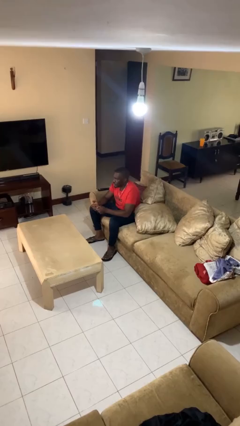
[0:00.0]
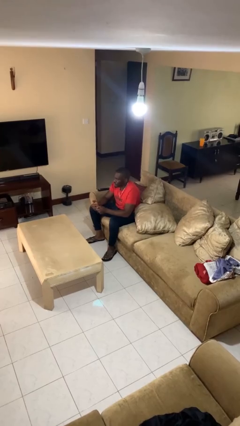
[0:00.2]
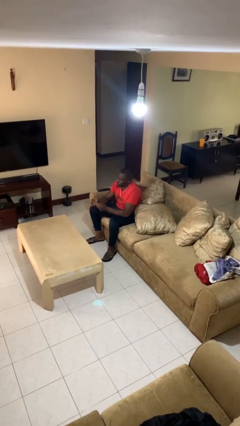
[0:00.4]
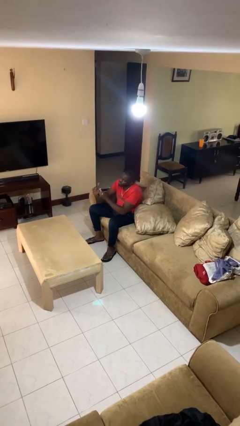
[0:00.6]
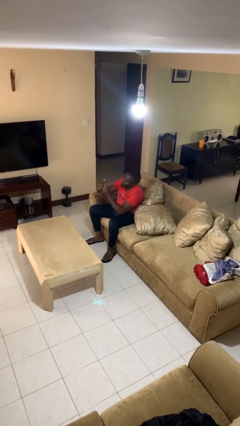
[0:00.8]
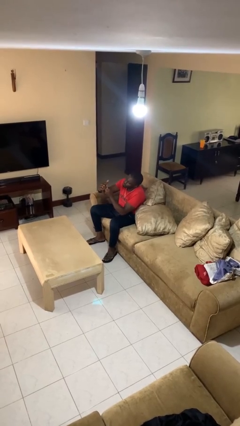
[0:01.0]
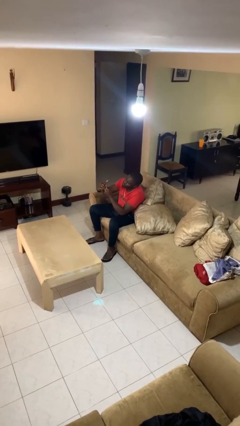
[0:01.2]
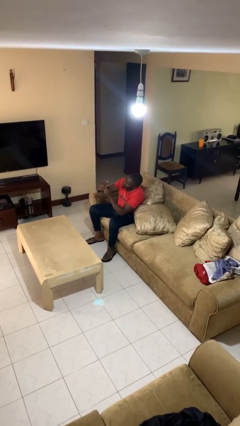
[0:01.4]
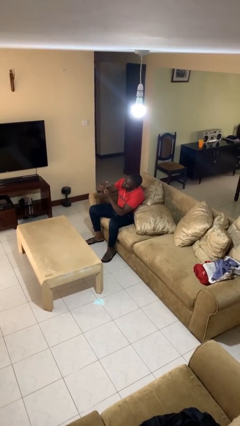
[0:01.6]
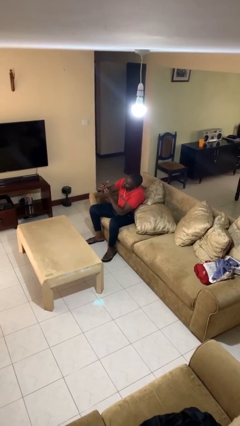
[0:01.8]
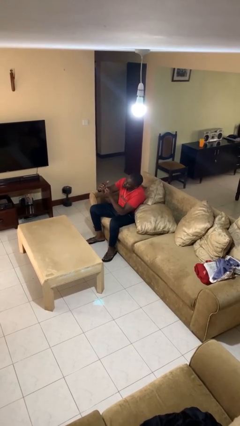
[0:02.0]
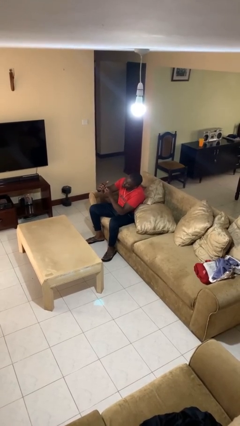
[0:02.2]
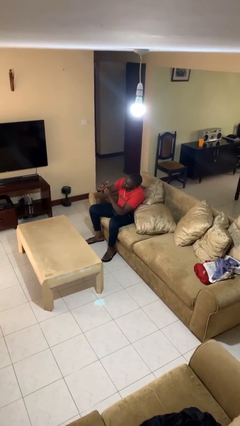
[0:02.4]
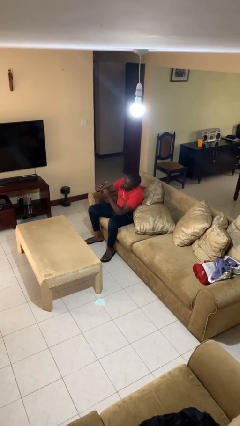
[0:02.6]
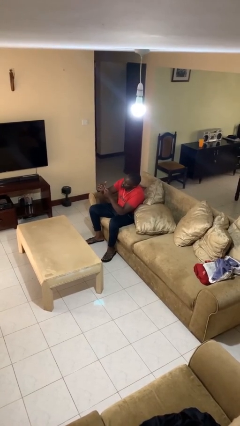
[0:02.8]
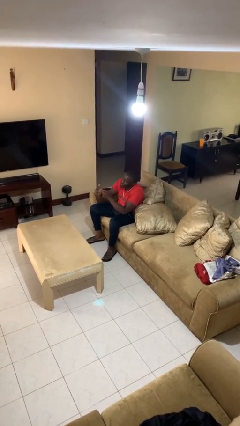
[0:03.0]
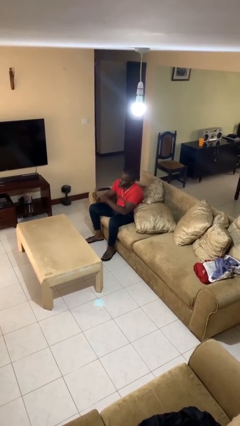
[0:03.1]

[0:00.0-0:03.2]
person clips fingernails

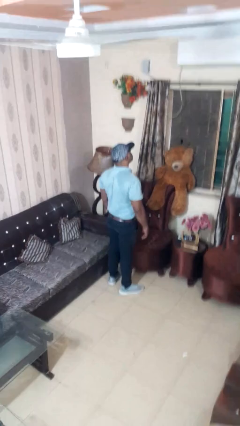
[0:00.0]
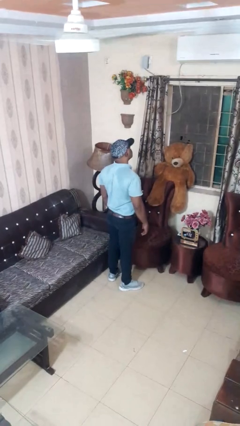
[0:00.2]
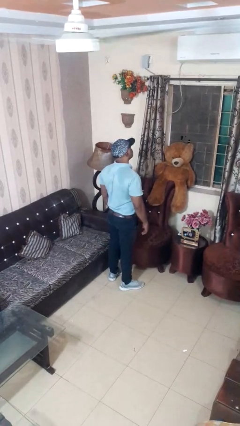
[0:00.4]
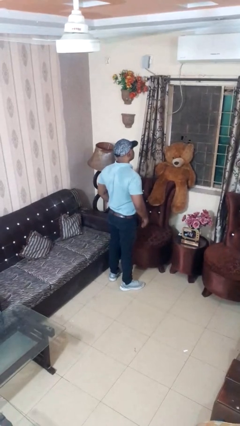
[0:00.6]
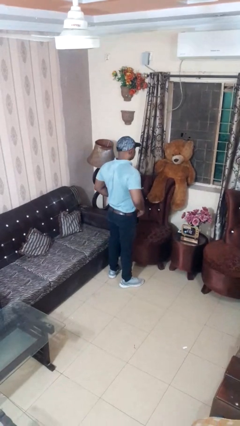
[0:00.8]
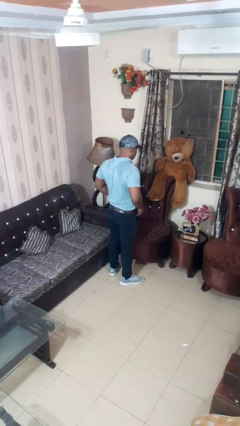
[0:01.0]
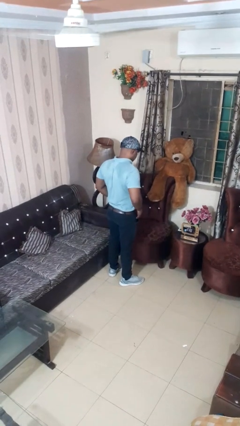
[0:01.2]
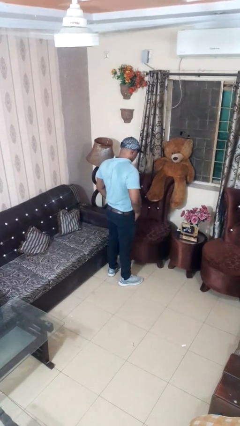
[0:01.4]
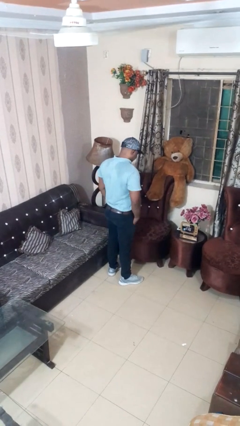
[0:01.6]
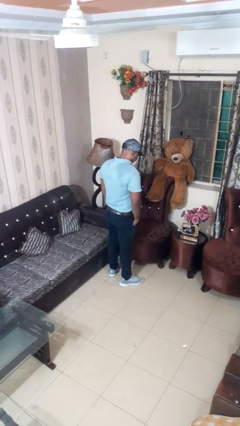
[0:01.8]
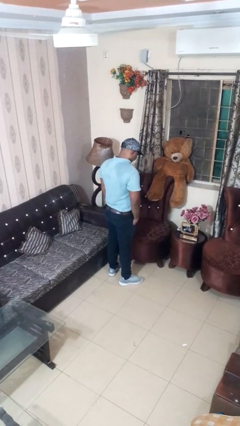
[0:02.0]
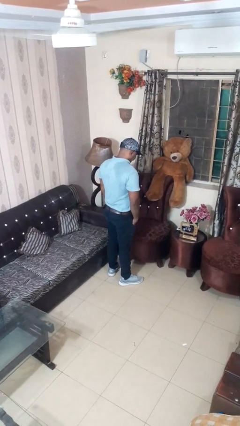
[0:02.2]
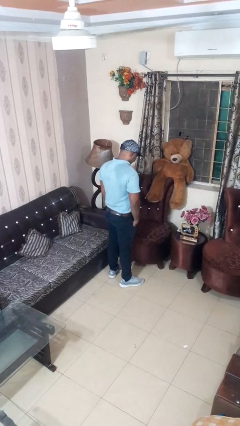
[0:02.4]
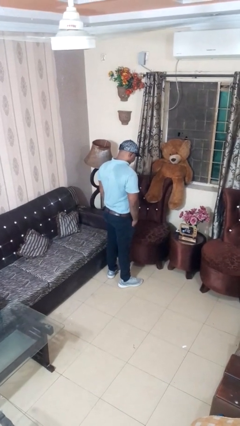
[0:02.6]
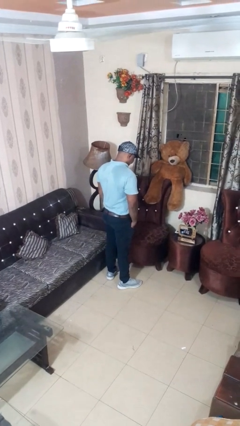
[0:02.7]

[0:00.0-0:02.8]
person puts hands in back pockets

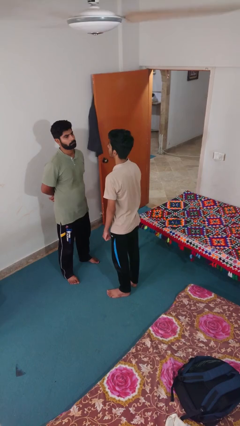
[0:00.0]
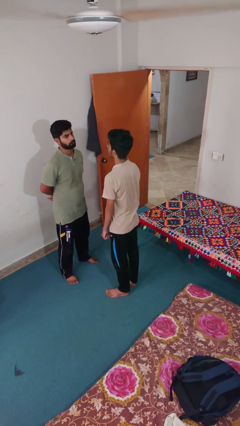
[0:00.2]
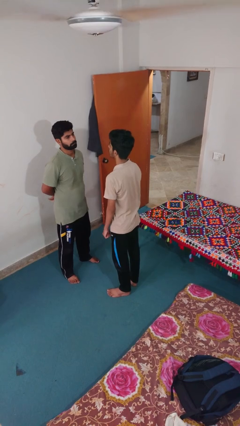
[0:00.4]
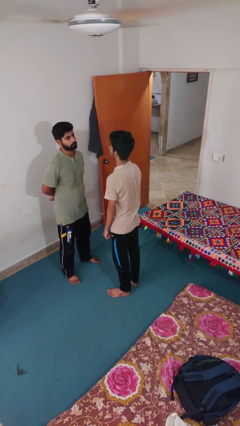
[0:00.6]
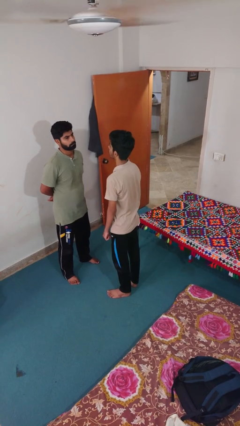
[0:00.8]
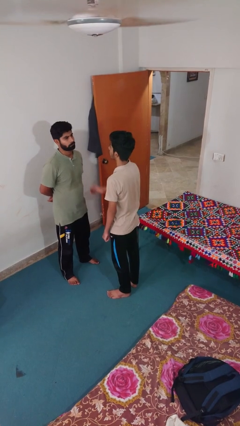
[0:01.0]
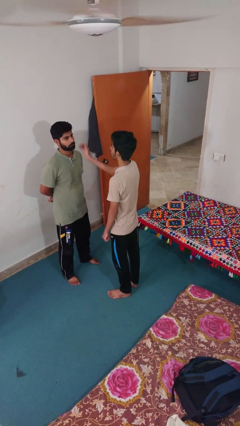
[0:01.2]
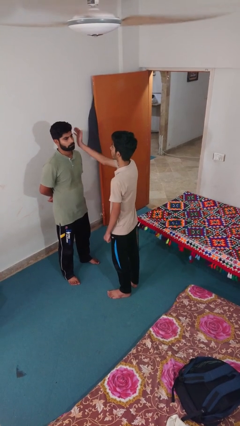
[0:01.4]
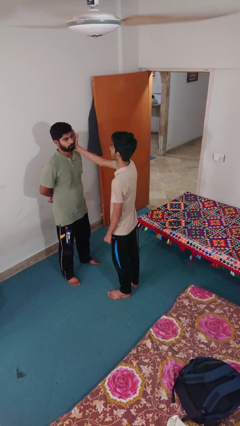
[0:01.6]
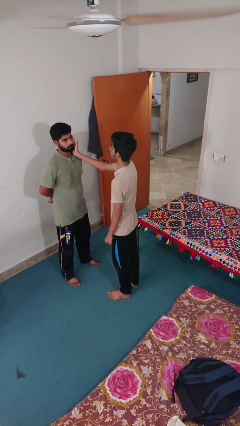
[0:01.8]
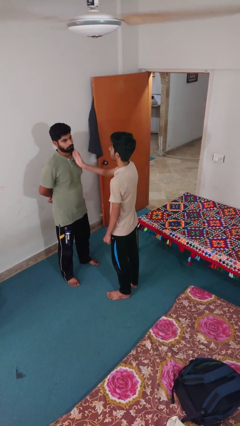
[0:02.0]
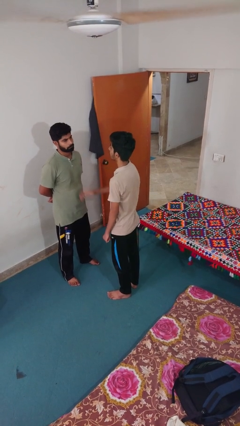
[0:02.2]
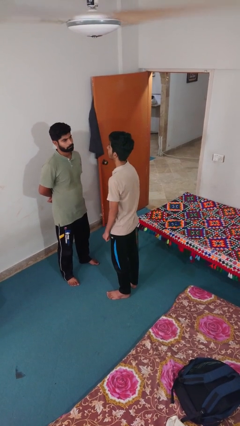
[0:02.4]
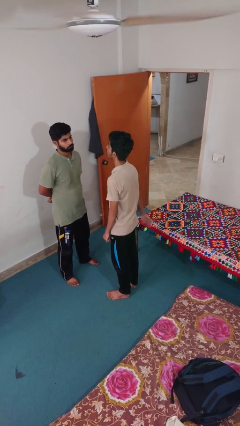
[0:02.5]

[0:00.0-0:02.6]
person touches face of person

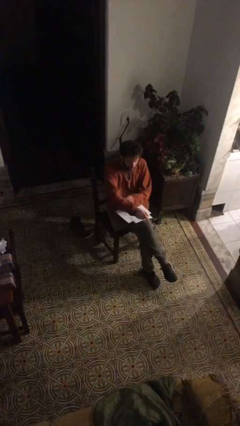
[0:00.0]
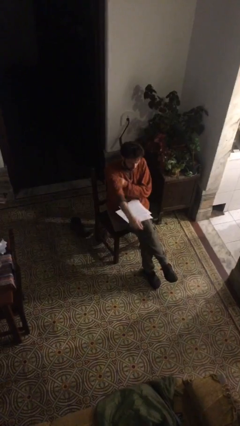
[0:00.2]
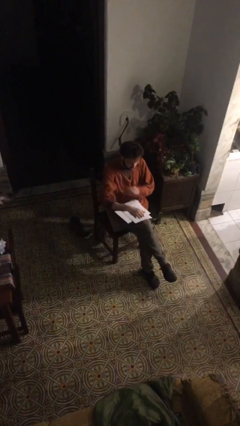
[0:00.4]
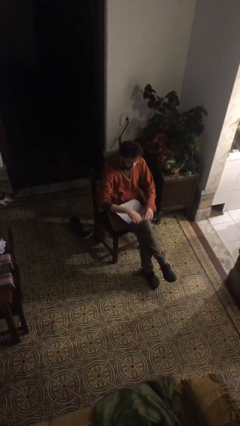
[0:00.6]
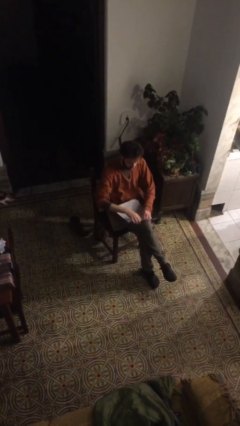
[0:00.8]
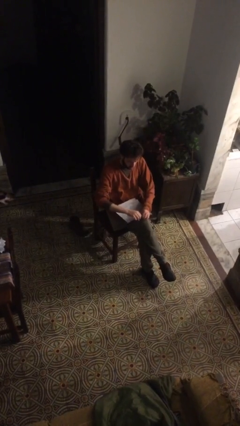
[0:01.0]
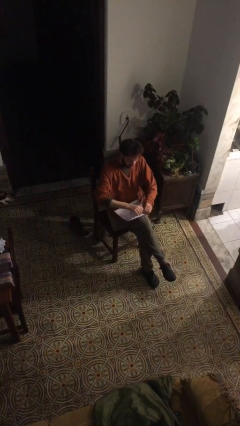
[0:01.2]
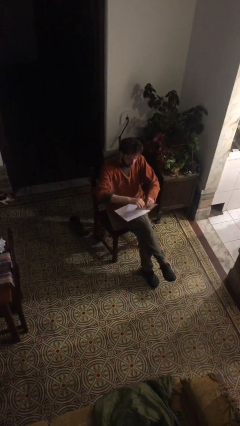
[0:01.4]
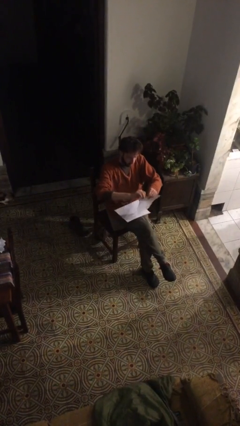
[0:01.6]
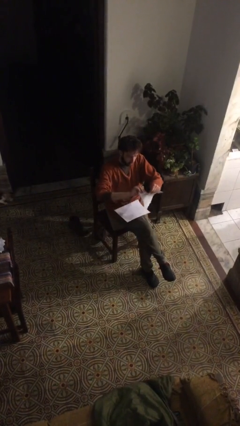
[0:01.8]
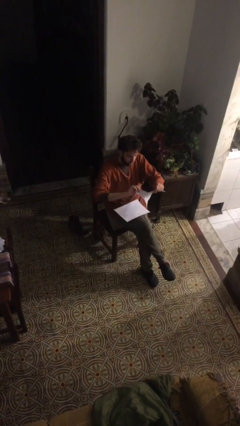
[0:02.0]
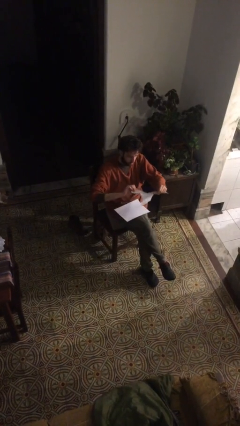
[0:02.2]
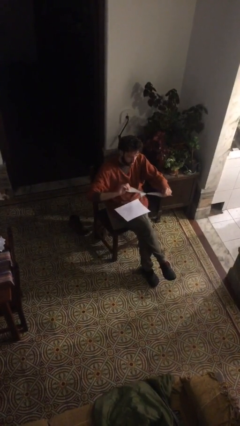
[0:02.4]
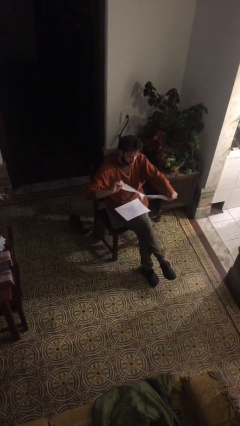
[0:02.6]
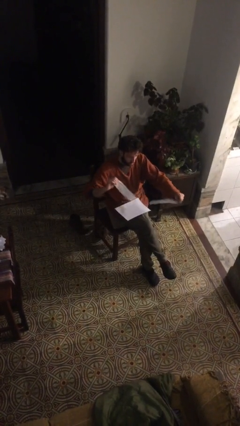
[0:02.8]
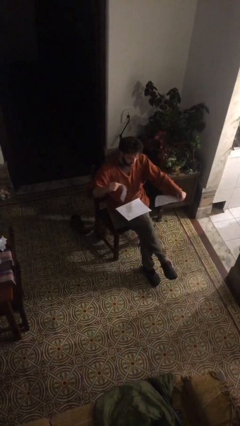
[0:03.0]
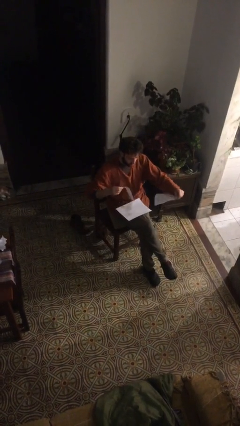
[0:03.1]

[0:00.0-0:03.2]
person tears paper

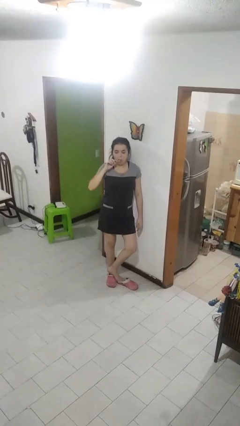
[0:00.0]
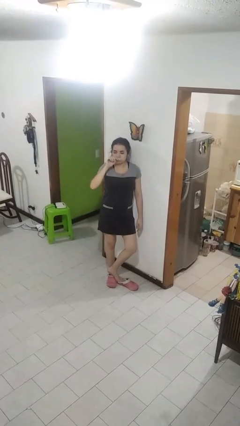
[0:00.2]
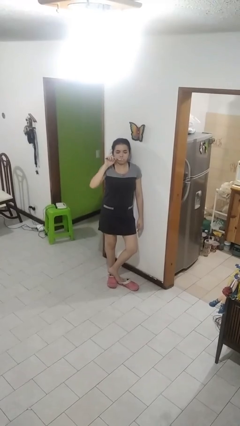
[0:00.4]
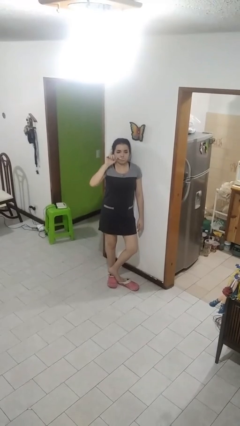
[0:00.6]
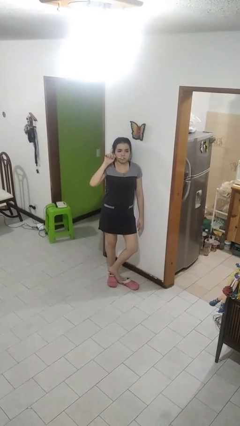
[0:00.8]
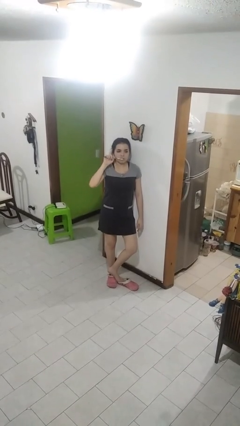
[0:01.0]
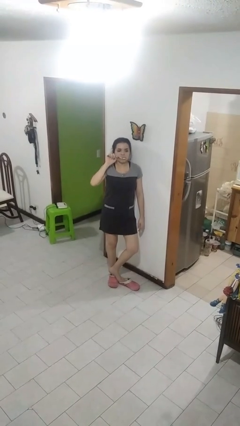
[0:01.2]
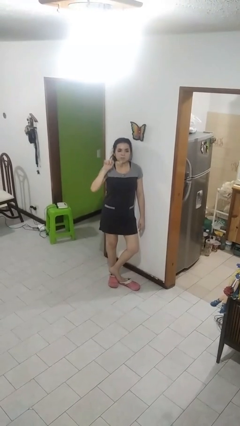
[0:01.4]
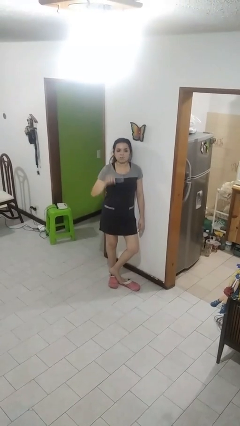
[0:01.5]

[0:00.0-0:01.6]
person brushes teeth

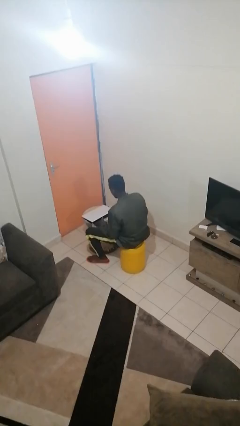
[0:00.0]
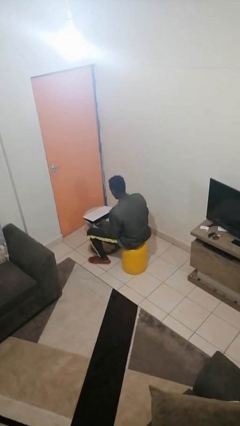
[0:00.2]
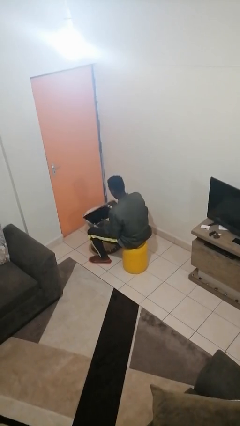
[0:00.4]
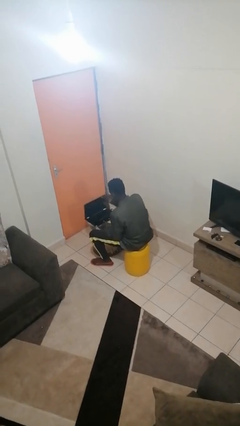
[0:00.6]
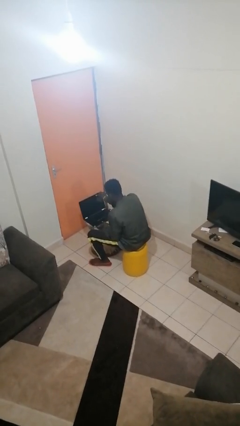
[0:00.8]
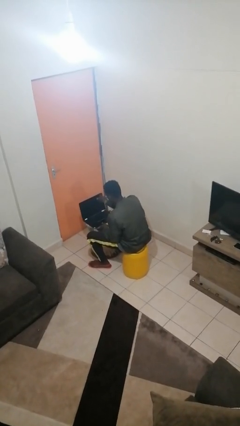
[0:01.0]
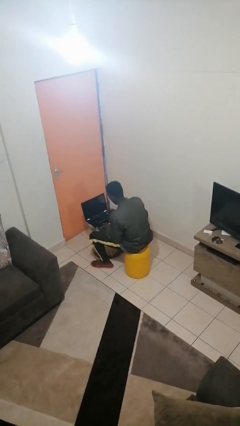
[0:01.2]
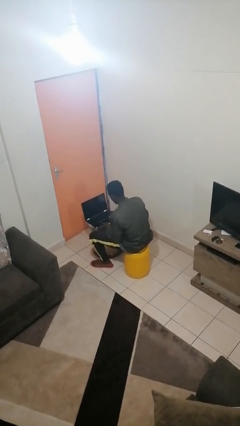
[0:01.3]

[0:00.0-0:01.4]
person opens laptop

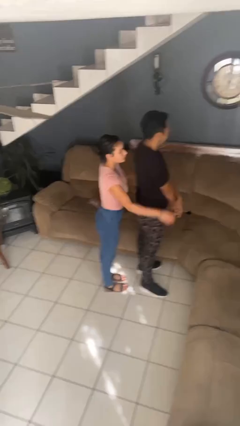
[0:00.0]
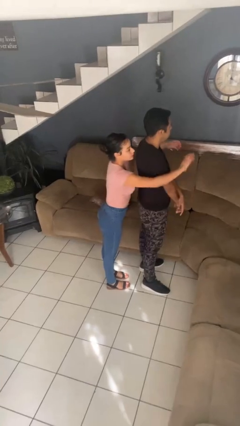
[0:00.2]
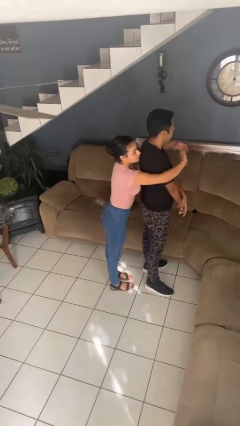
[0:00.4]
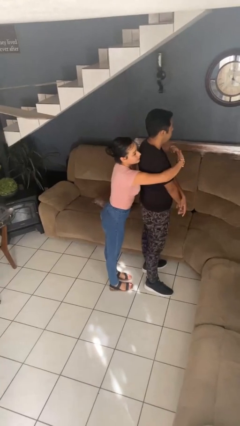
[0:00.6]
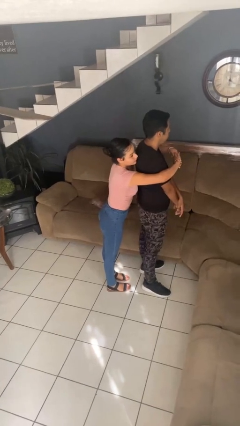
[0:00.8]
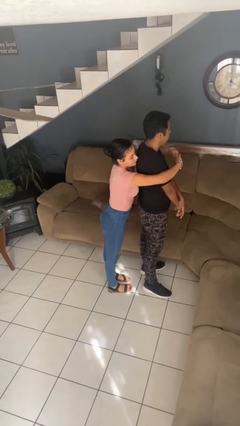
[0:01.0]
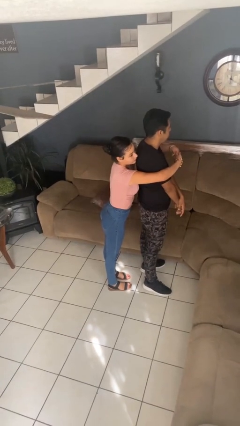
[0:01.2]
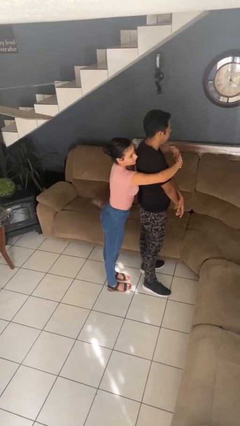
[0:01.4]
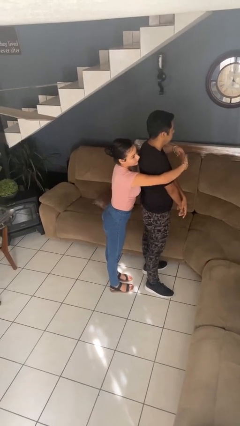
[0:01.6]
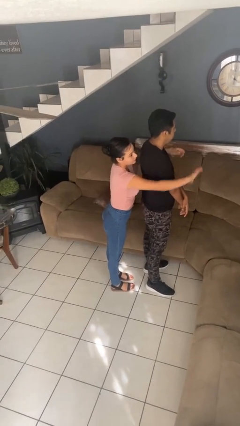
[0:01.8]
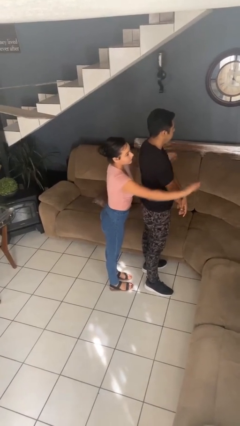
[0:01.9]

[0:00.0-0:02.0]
person hugs person from behind
